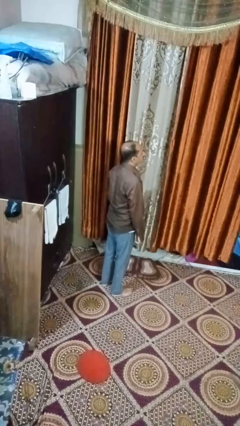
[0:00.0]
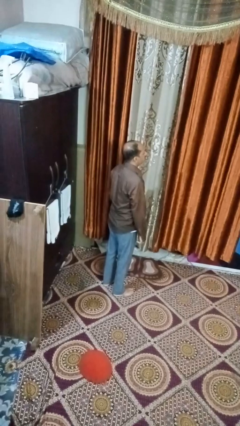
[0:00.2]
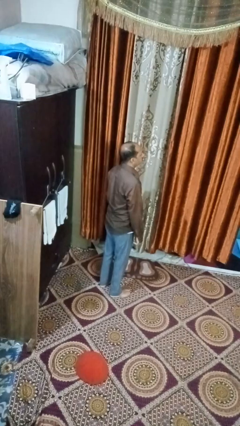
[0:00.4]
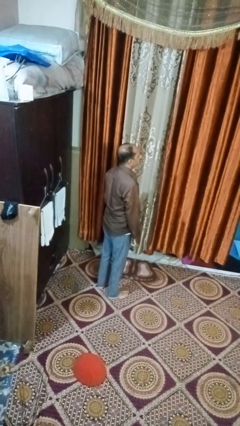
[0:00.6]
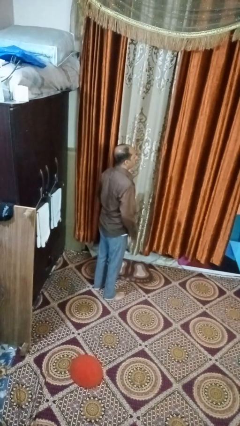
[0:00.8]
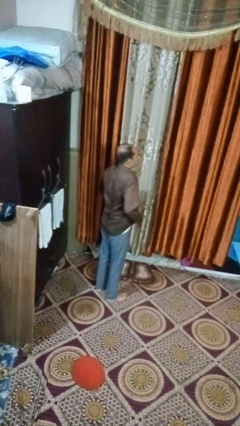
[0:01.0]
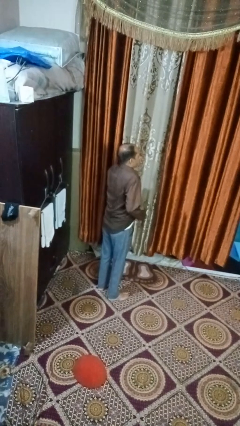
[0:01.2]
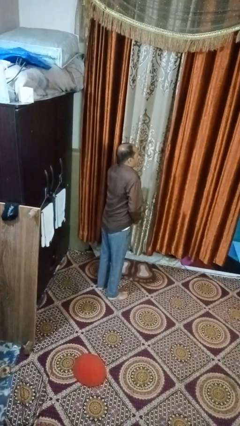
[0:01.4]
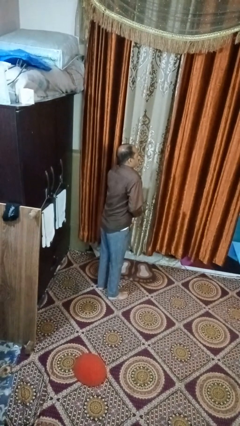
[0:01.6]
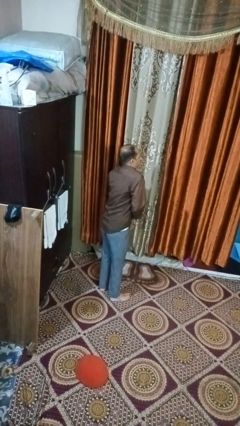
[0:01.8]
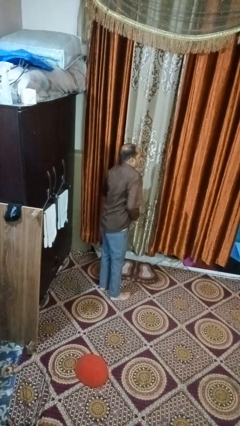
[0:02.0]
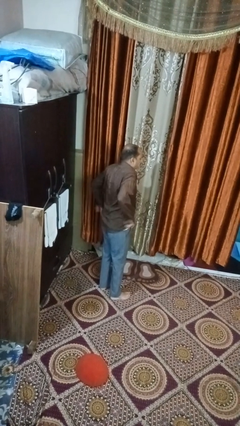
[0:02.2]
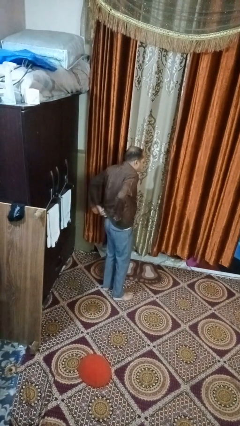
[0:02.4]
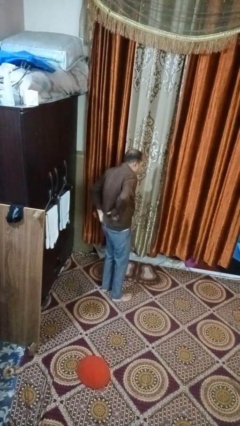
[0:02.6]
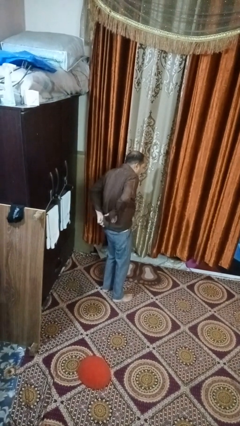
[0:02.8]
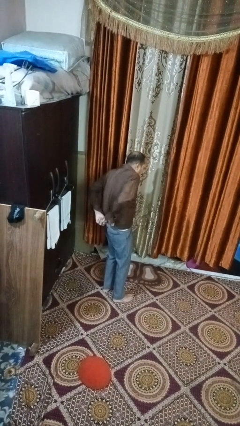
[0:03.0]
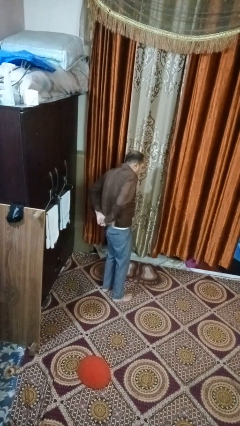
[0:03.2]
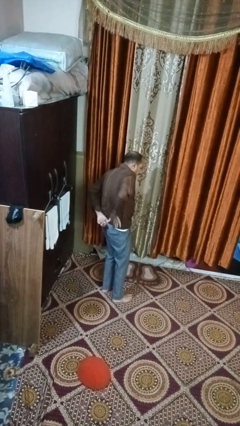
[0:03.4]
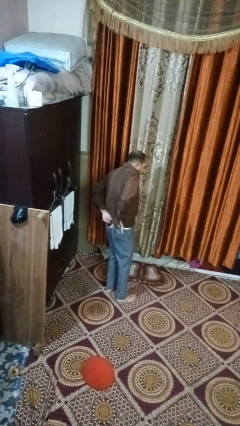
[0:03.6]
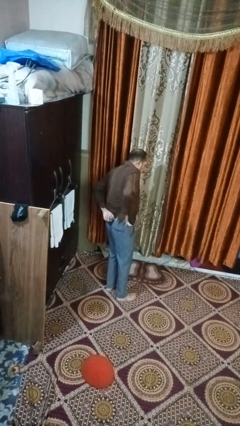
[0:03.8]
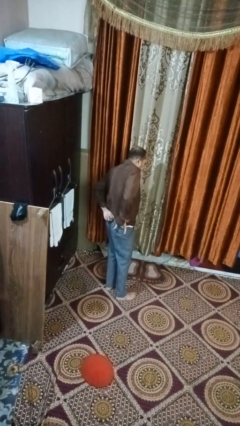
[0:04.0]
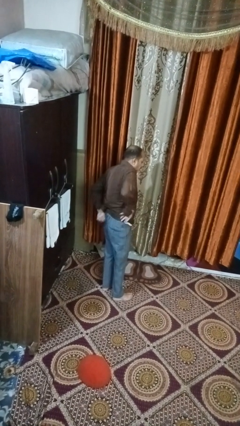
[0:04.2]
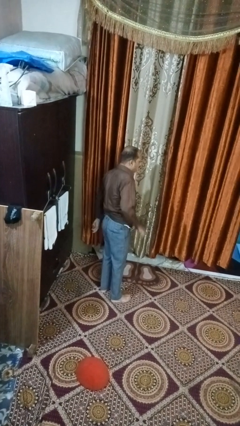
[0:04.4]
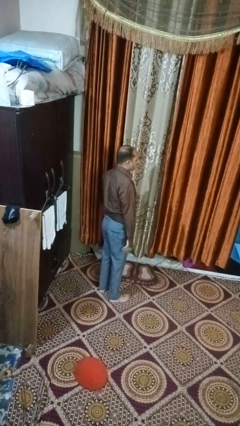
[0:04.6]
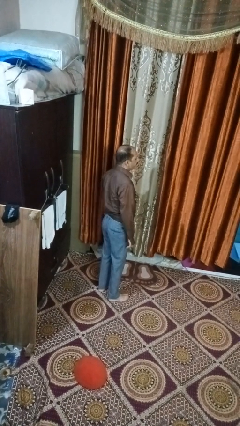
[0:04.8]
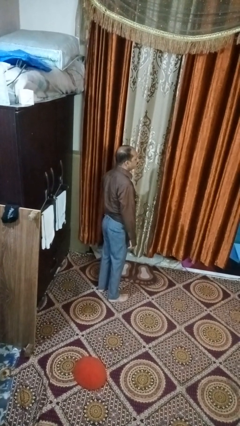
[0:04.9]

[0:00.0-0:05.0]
person tucks in shirt

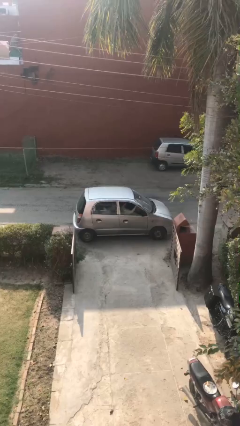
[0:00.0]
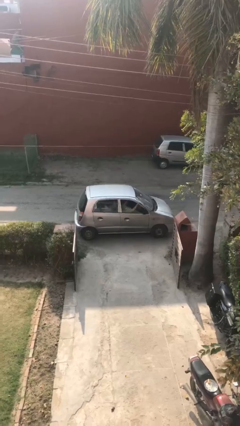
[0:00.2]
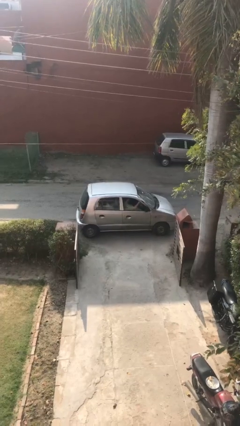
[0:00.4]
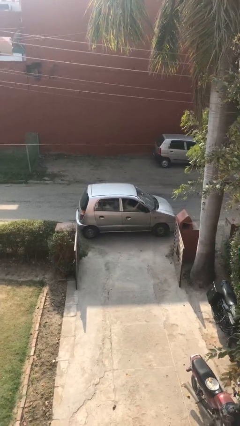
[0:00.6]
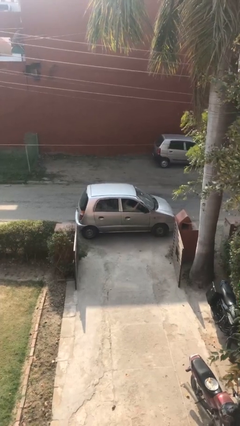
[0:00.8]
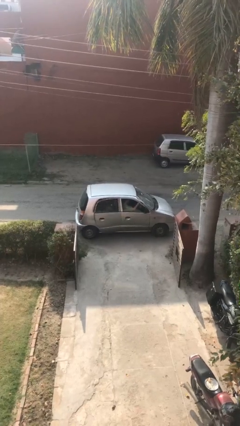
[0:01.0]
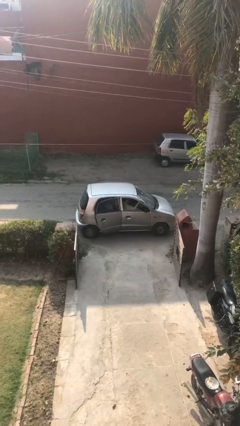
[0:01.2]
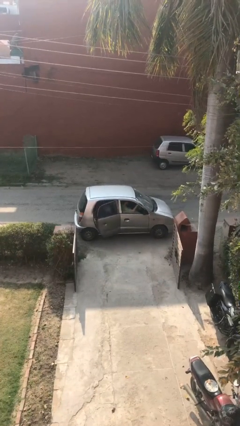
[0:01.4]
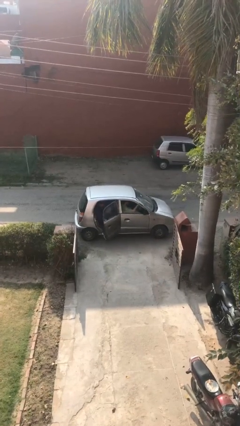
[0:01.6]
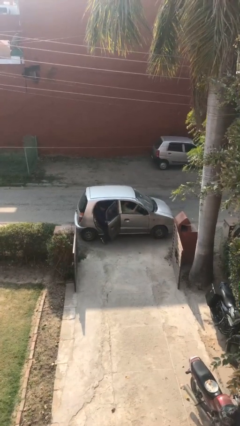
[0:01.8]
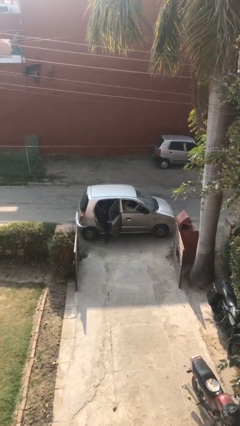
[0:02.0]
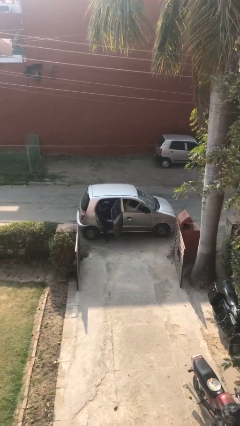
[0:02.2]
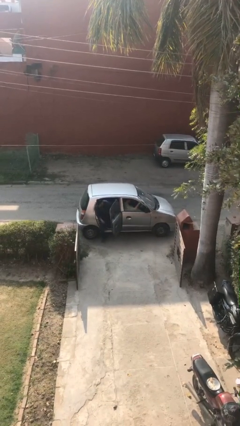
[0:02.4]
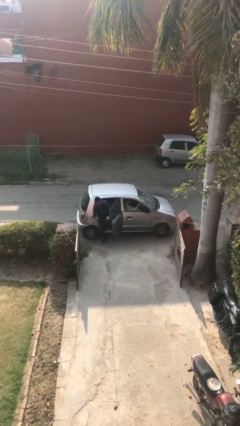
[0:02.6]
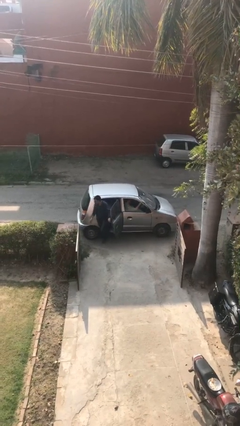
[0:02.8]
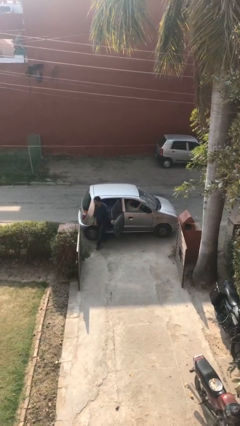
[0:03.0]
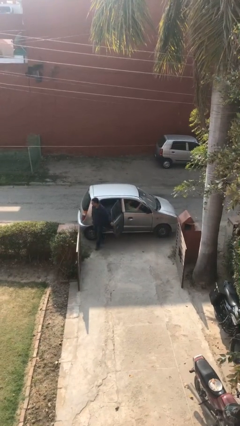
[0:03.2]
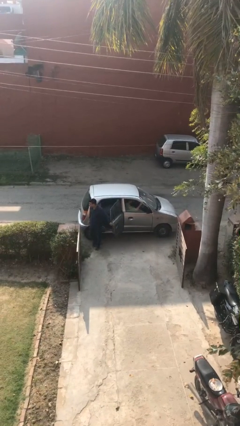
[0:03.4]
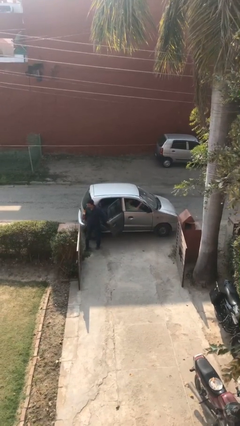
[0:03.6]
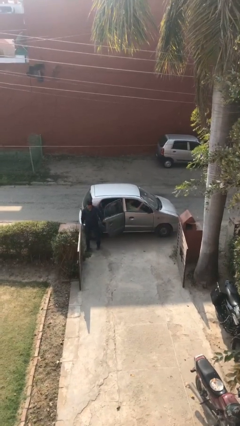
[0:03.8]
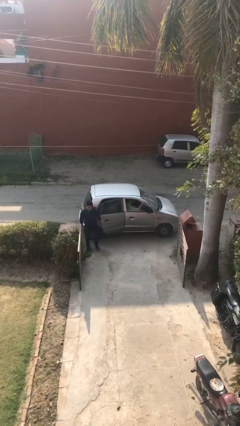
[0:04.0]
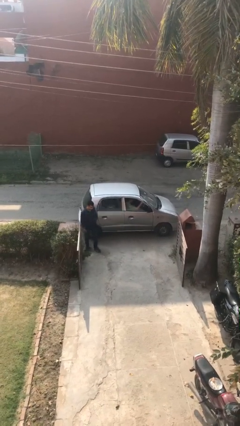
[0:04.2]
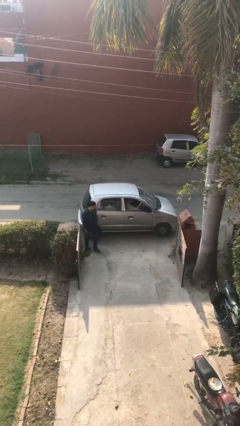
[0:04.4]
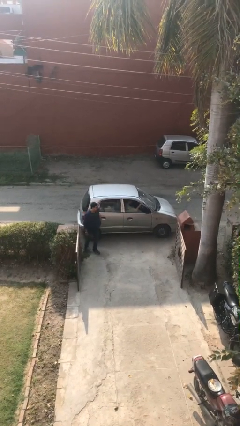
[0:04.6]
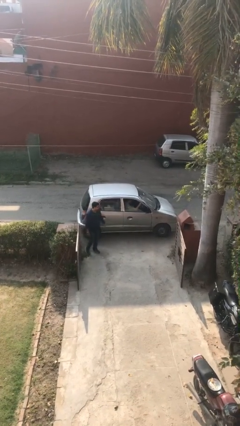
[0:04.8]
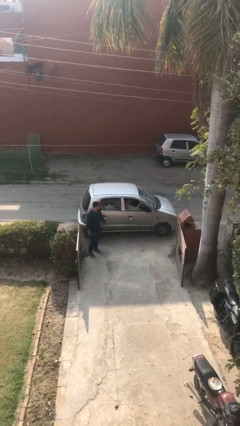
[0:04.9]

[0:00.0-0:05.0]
car drops off person

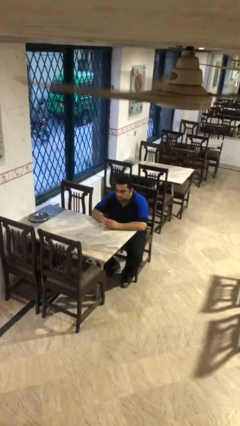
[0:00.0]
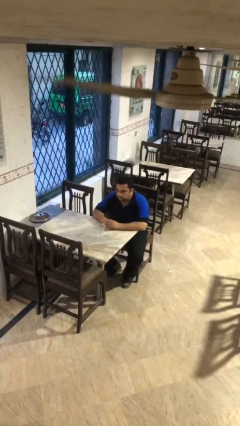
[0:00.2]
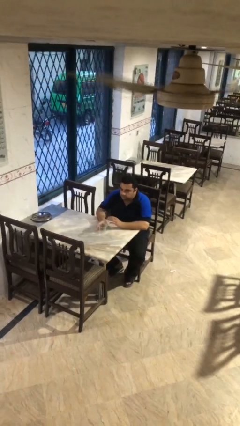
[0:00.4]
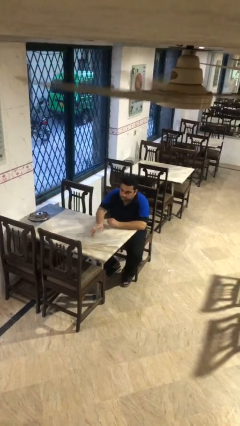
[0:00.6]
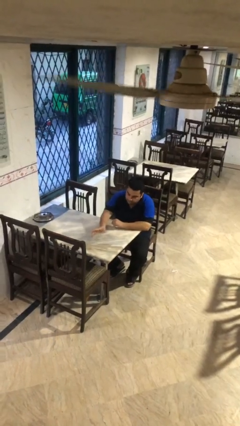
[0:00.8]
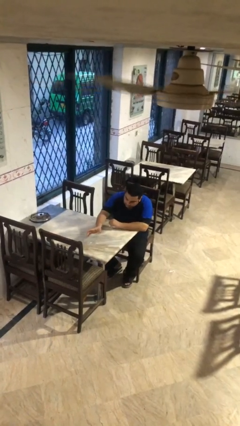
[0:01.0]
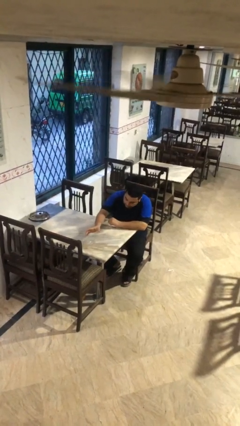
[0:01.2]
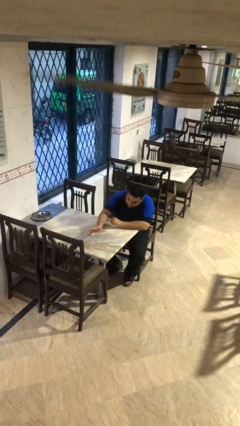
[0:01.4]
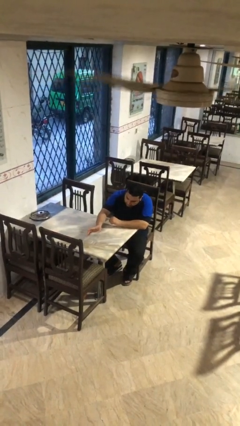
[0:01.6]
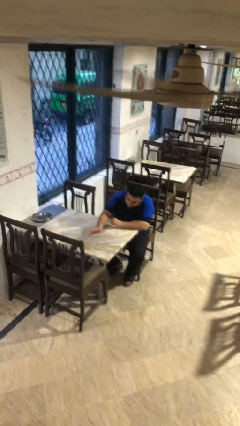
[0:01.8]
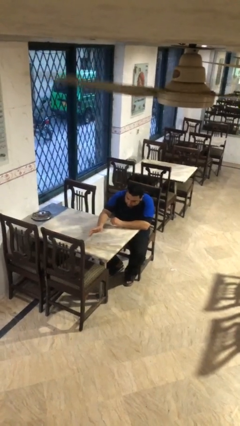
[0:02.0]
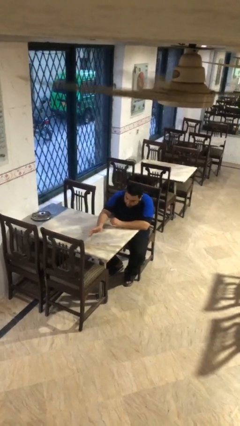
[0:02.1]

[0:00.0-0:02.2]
person knocks over glass

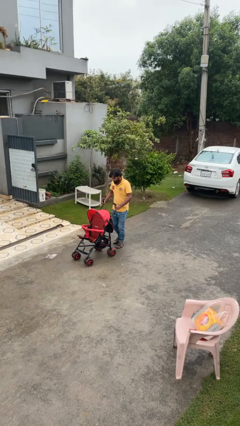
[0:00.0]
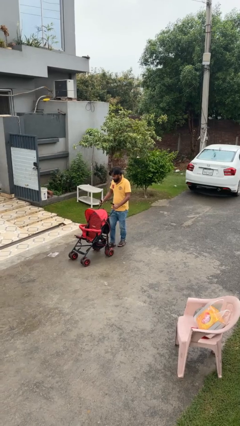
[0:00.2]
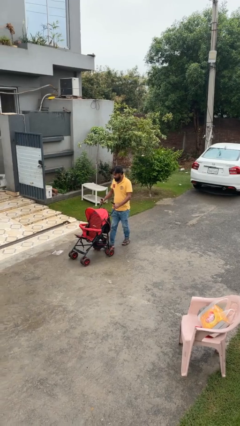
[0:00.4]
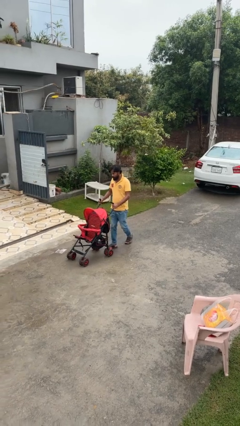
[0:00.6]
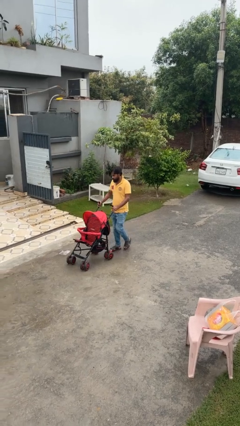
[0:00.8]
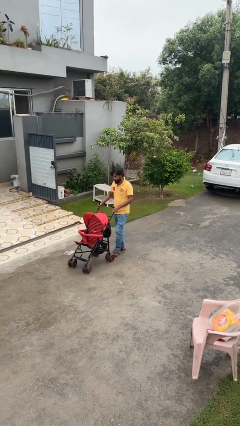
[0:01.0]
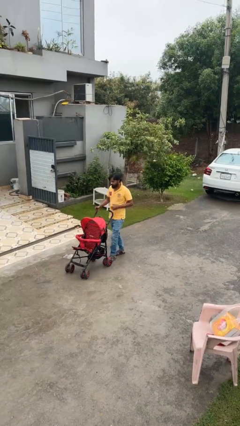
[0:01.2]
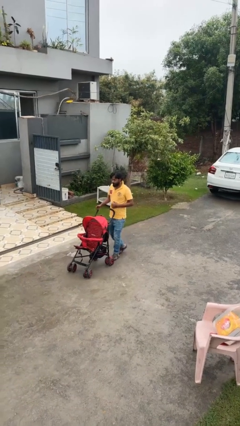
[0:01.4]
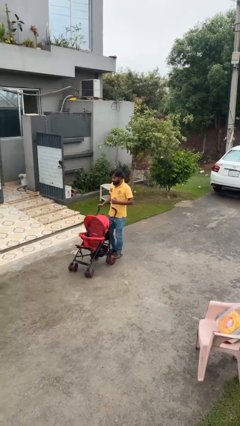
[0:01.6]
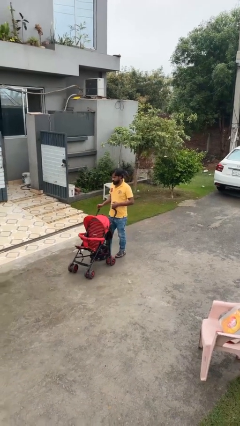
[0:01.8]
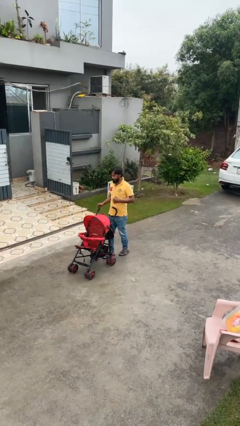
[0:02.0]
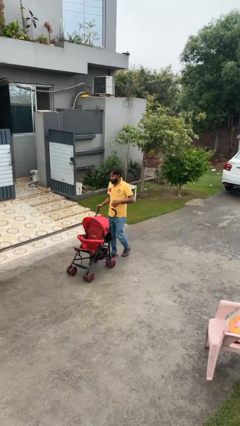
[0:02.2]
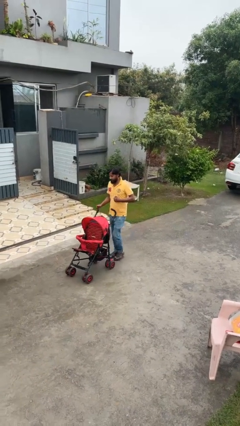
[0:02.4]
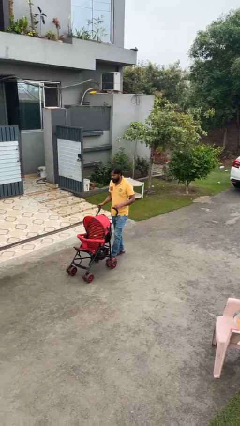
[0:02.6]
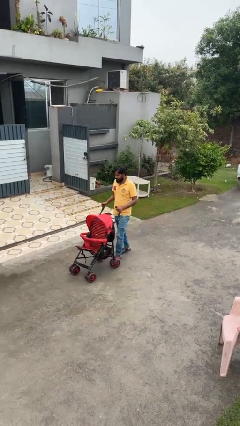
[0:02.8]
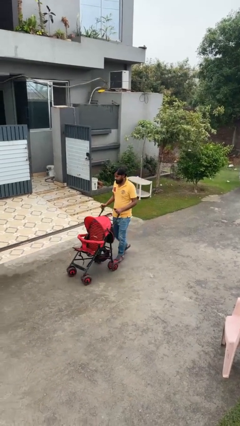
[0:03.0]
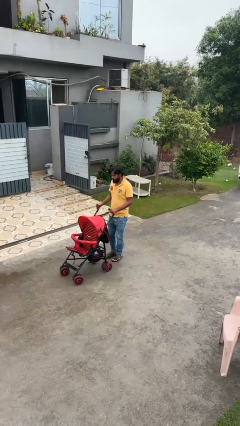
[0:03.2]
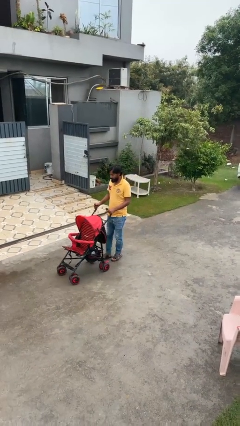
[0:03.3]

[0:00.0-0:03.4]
person pushes wheeled cart

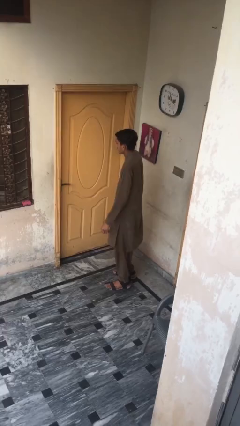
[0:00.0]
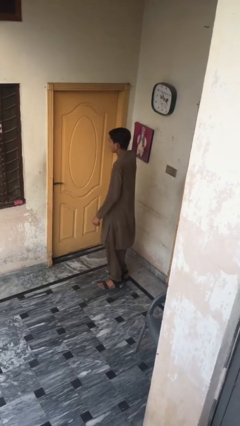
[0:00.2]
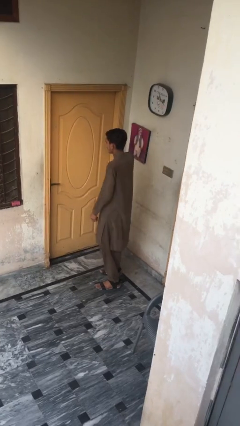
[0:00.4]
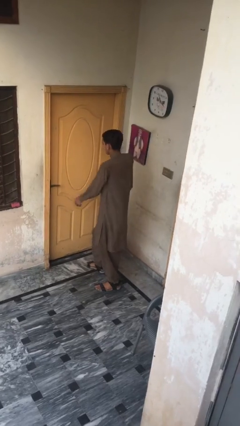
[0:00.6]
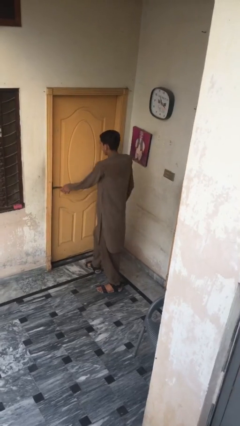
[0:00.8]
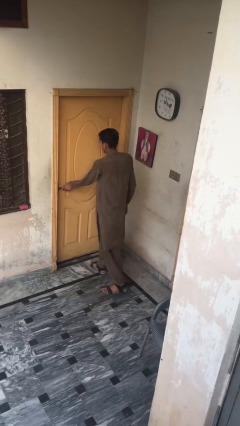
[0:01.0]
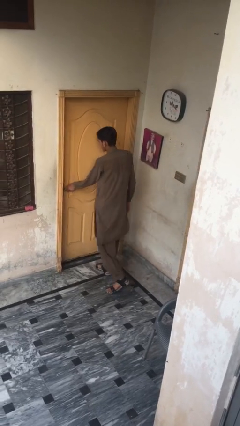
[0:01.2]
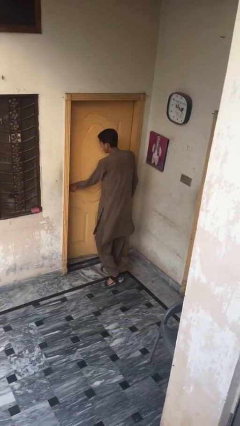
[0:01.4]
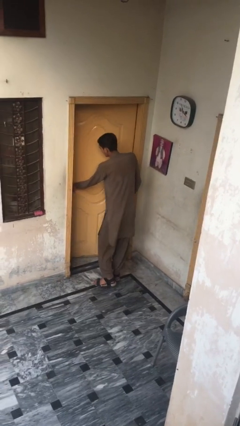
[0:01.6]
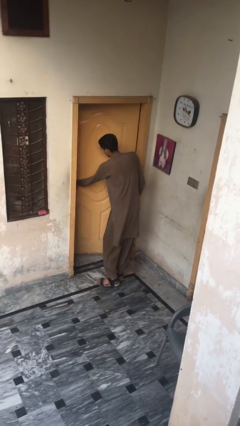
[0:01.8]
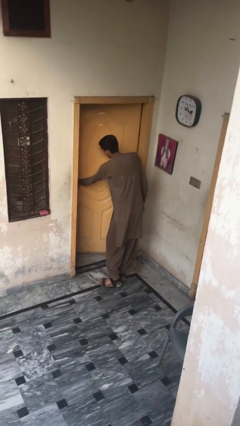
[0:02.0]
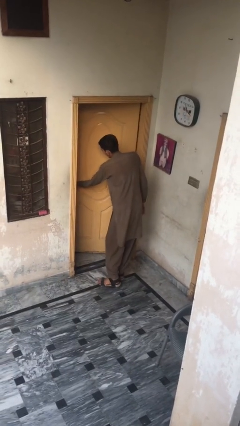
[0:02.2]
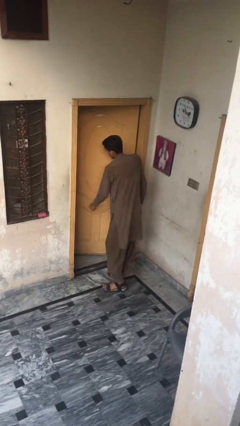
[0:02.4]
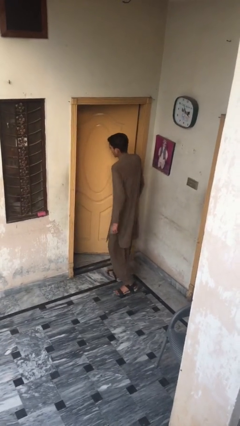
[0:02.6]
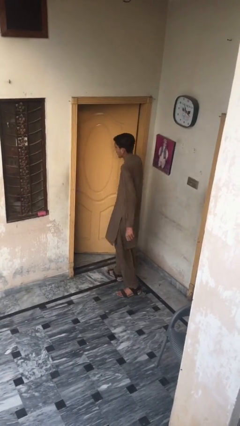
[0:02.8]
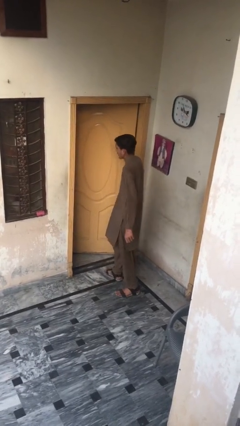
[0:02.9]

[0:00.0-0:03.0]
person opens facility door
